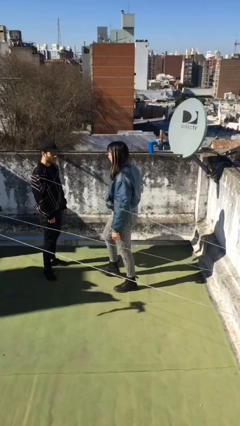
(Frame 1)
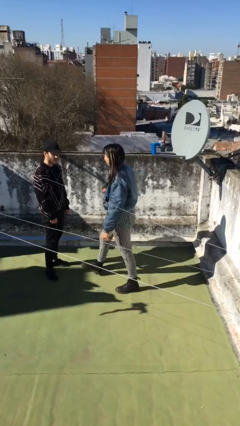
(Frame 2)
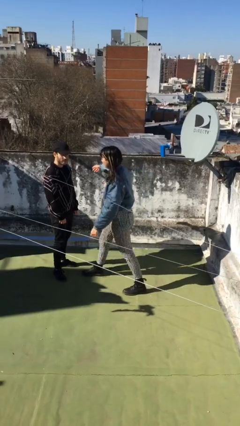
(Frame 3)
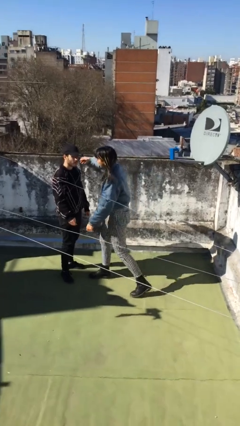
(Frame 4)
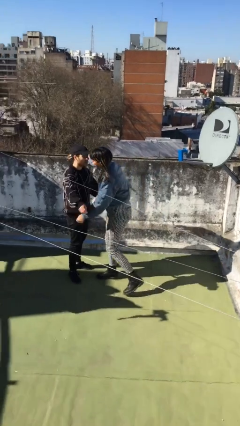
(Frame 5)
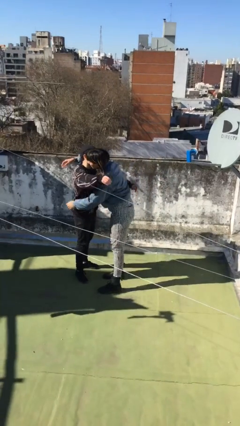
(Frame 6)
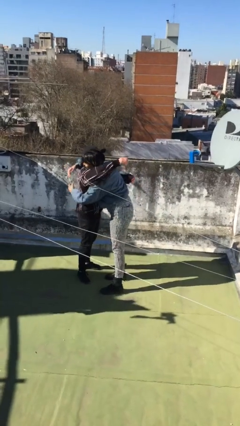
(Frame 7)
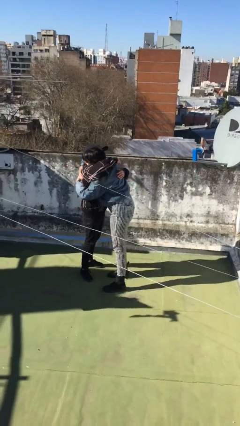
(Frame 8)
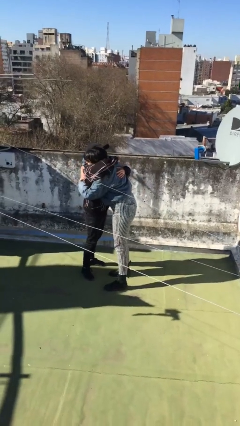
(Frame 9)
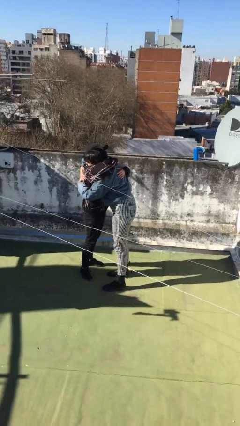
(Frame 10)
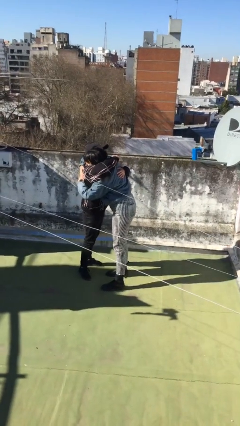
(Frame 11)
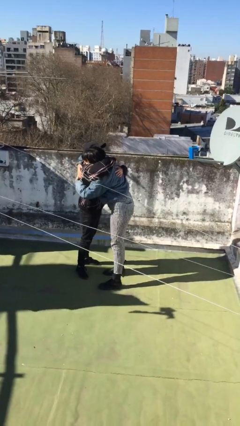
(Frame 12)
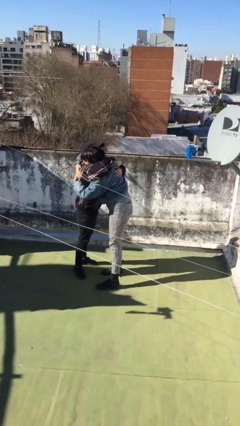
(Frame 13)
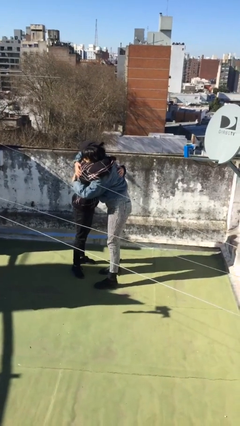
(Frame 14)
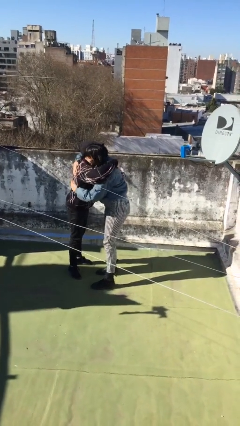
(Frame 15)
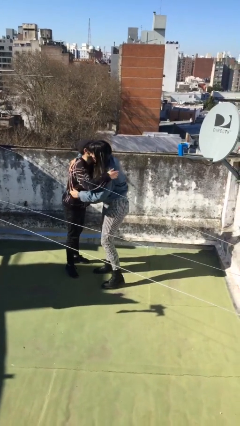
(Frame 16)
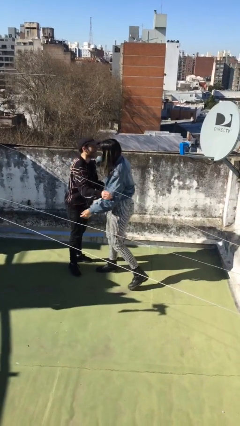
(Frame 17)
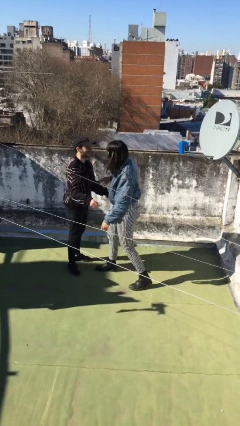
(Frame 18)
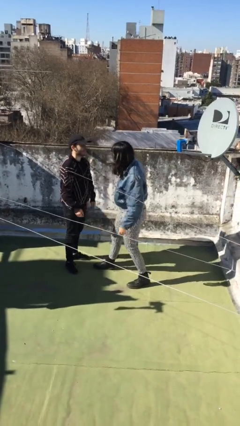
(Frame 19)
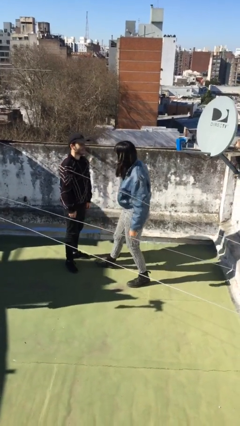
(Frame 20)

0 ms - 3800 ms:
person embraces person

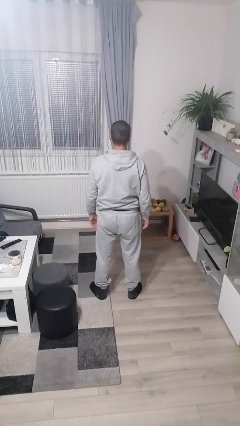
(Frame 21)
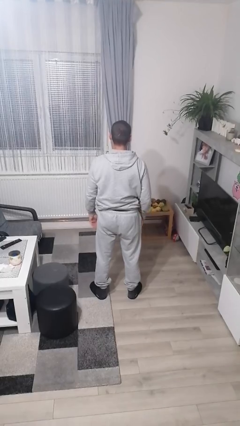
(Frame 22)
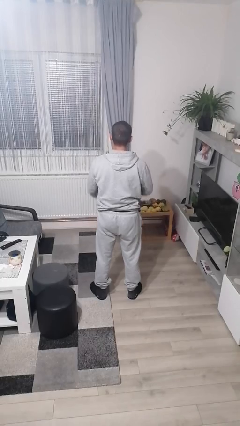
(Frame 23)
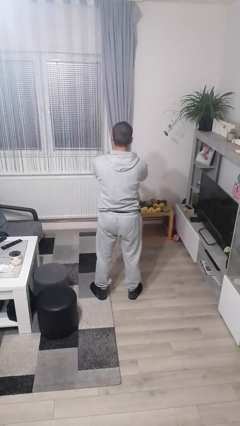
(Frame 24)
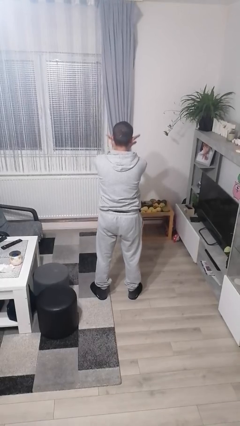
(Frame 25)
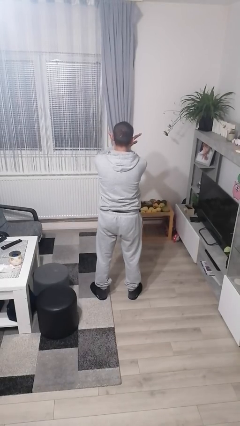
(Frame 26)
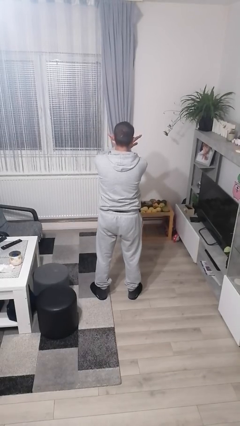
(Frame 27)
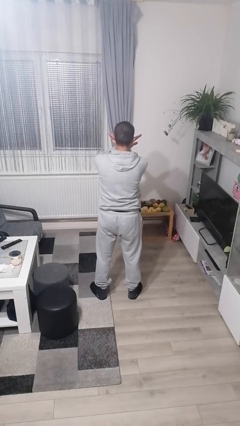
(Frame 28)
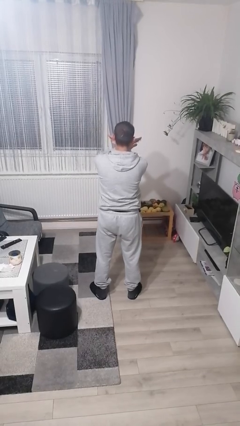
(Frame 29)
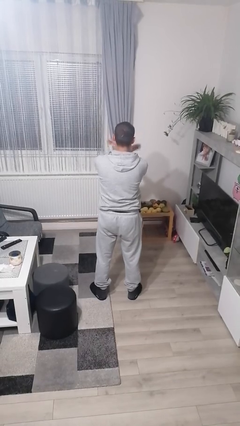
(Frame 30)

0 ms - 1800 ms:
person gestures arms x

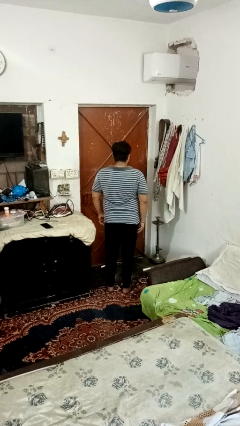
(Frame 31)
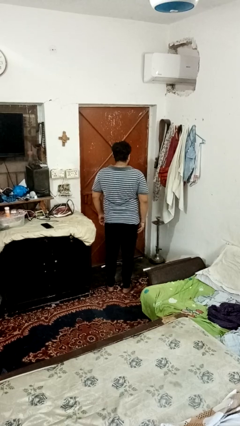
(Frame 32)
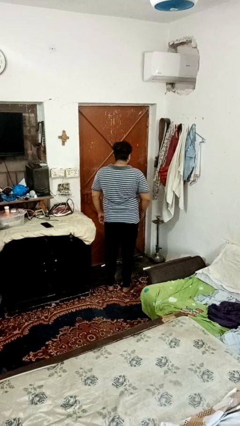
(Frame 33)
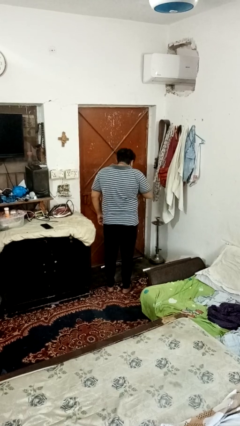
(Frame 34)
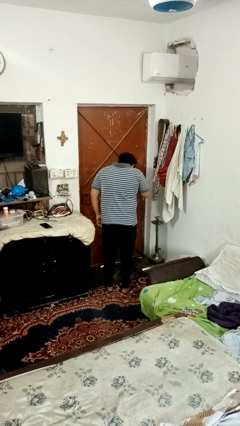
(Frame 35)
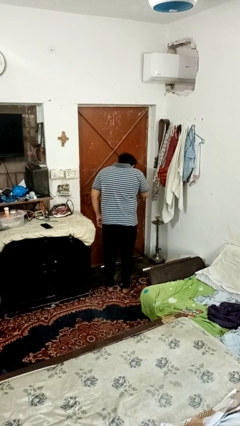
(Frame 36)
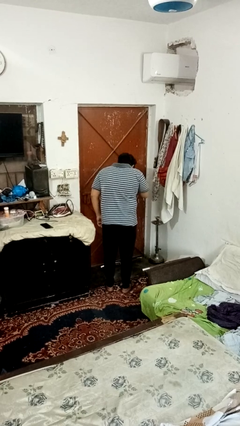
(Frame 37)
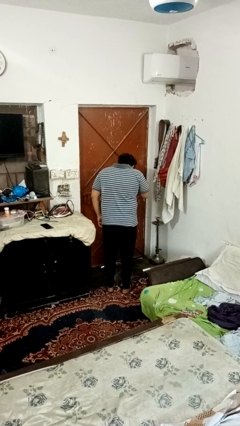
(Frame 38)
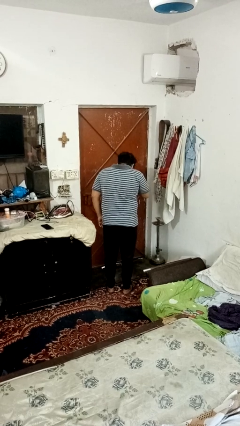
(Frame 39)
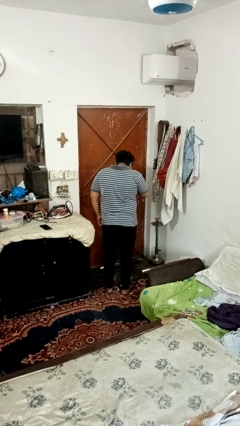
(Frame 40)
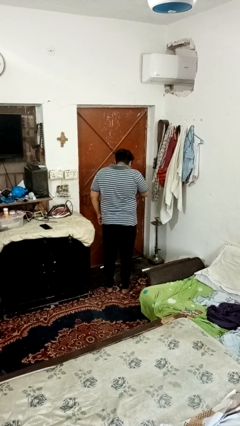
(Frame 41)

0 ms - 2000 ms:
person sneezes into hand

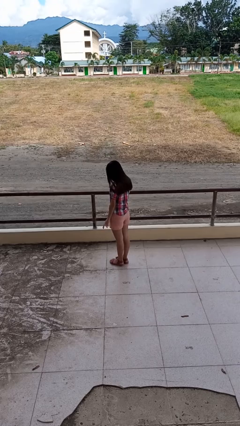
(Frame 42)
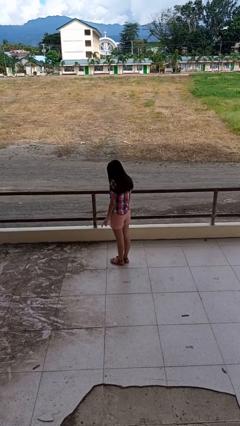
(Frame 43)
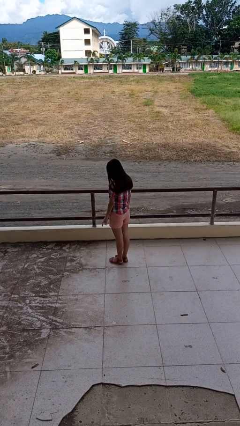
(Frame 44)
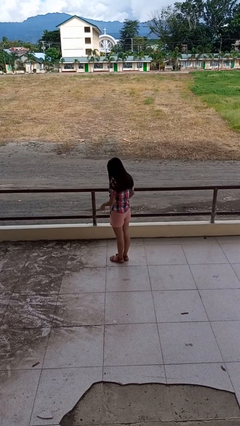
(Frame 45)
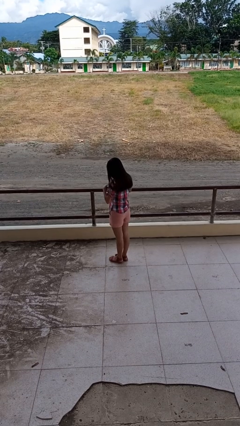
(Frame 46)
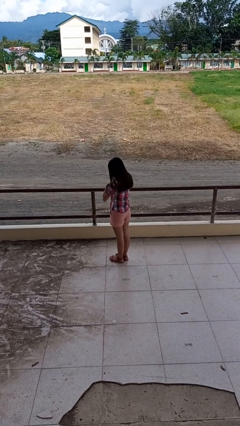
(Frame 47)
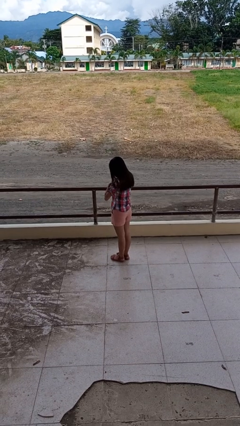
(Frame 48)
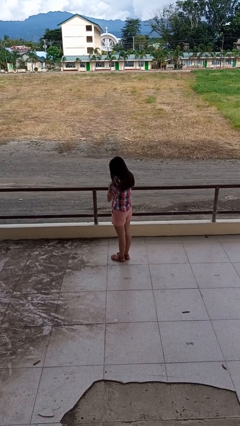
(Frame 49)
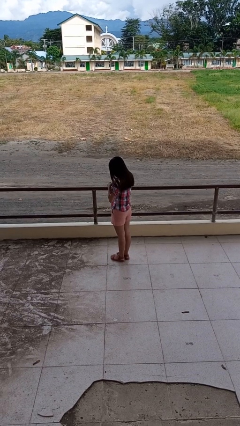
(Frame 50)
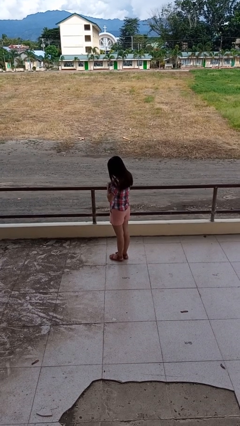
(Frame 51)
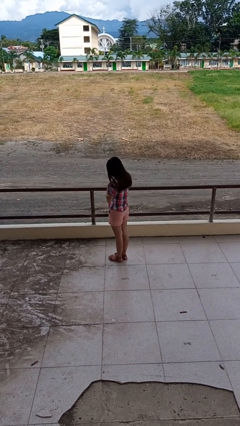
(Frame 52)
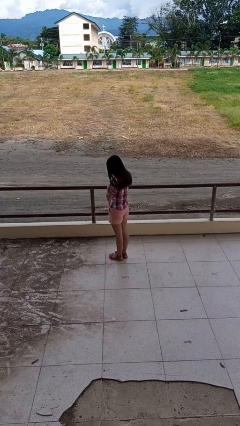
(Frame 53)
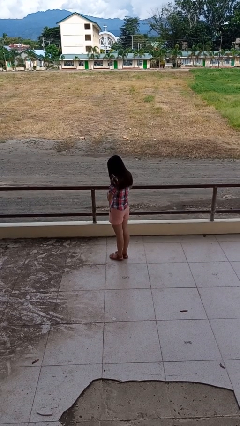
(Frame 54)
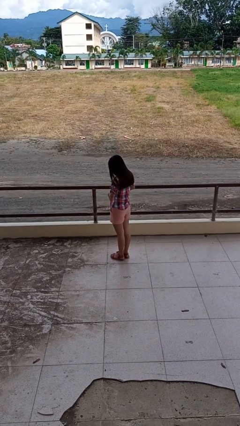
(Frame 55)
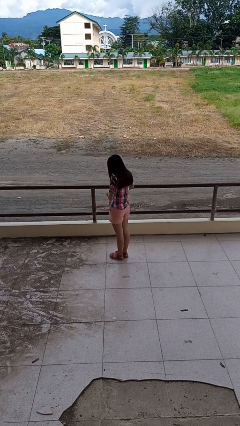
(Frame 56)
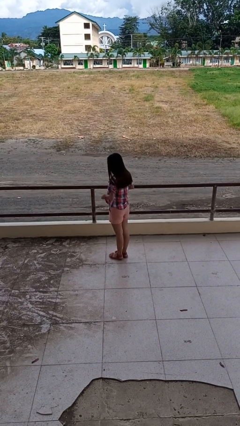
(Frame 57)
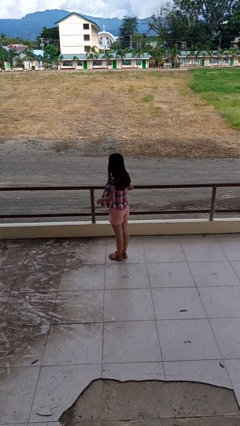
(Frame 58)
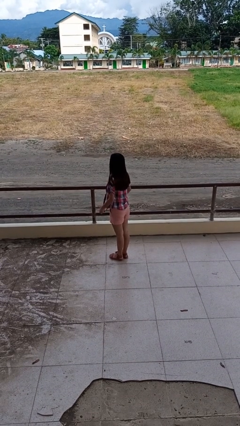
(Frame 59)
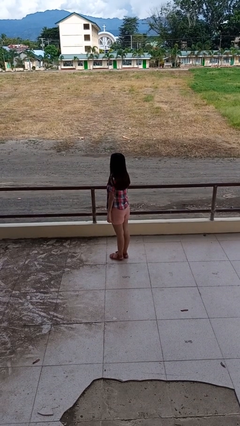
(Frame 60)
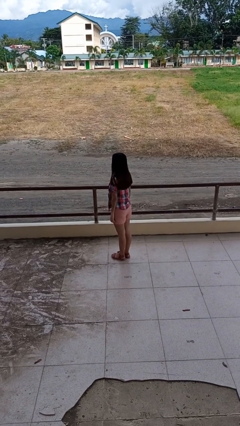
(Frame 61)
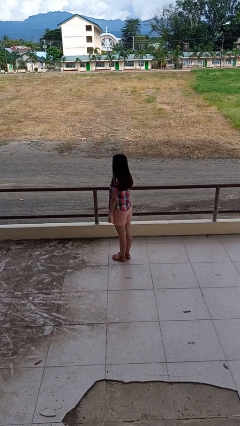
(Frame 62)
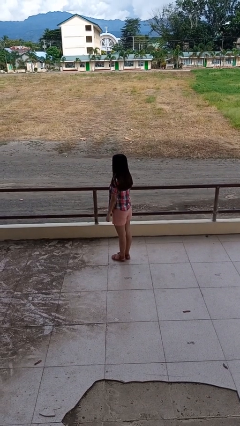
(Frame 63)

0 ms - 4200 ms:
person unbuttons shirt

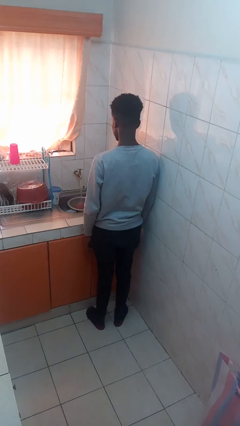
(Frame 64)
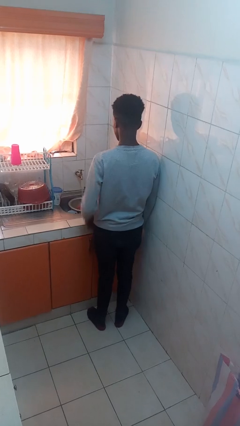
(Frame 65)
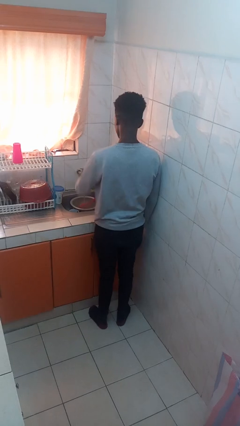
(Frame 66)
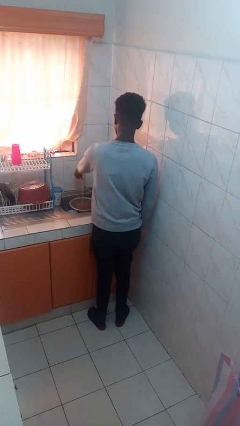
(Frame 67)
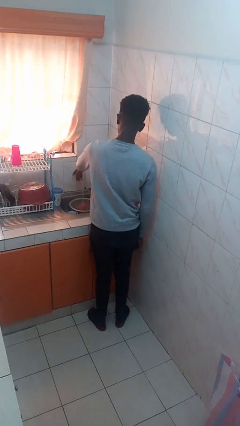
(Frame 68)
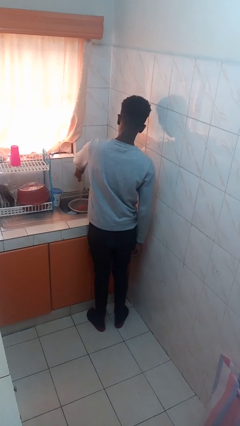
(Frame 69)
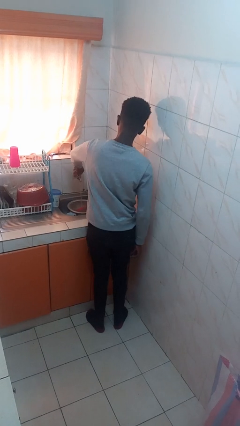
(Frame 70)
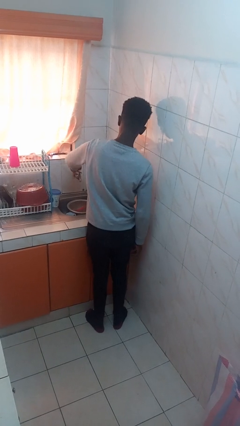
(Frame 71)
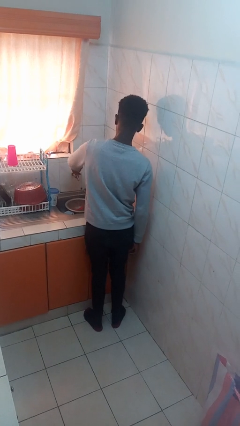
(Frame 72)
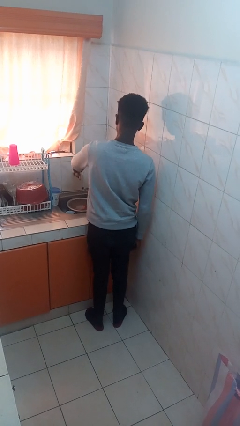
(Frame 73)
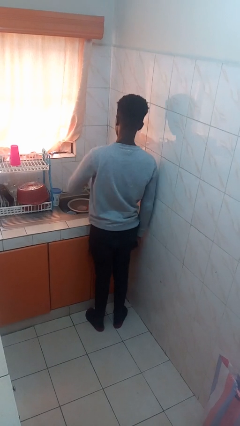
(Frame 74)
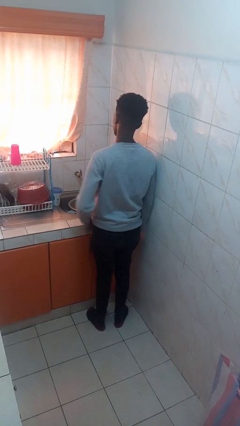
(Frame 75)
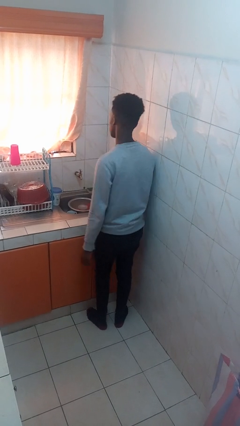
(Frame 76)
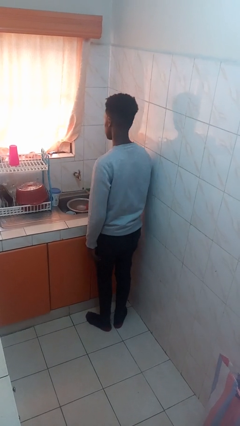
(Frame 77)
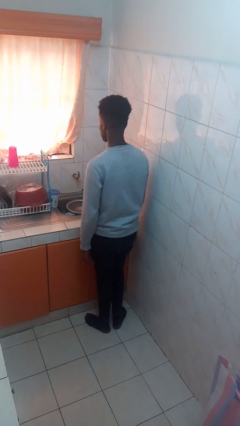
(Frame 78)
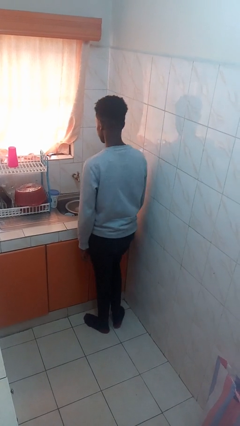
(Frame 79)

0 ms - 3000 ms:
person turns off faucet

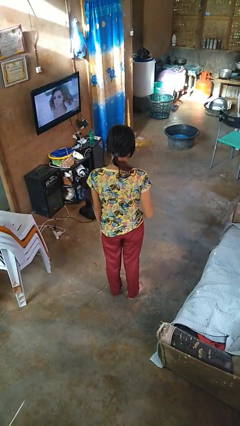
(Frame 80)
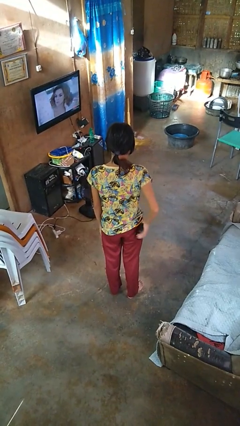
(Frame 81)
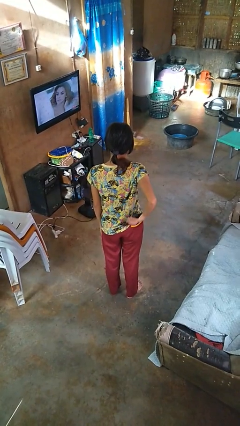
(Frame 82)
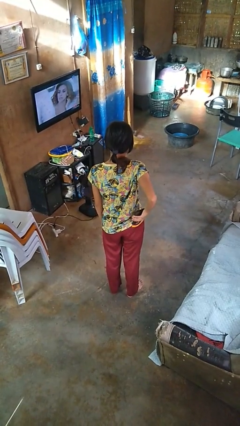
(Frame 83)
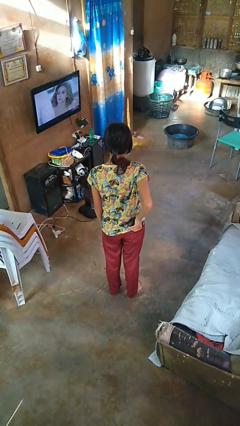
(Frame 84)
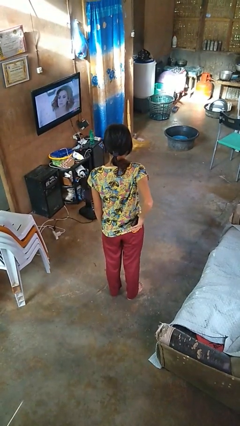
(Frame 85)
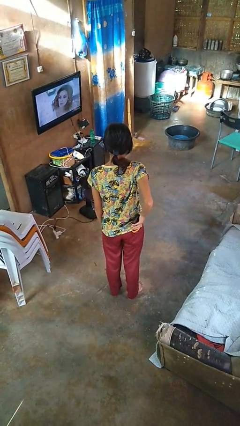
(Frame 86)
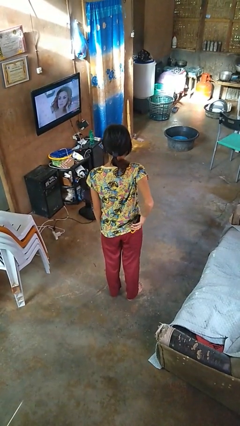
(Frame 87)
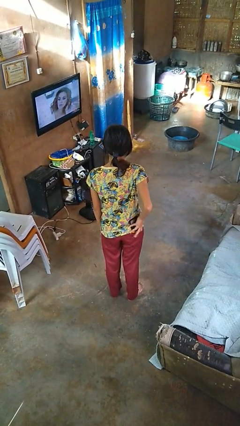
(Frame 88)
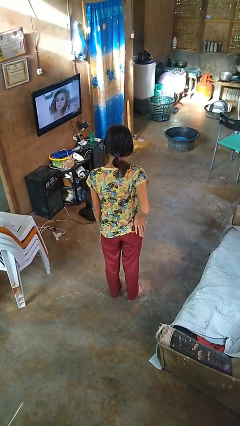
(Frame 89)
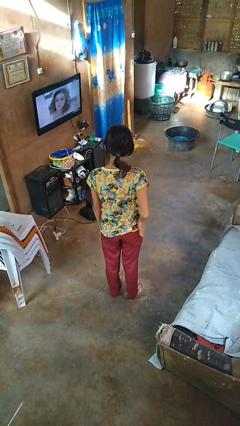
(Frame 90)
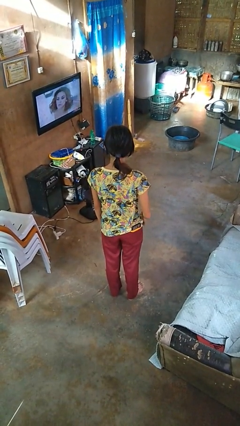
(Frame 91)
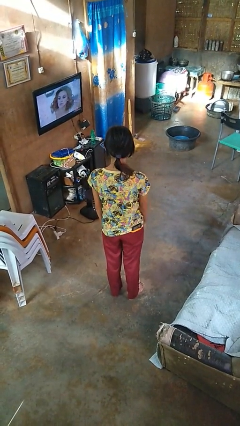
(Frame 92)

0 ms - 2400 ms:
person puts phone into pocket
